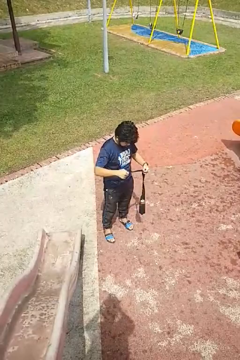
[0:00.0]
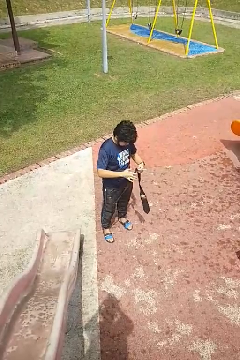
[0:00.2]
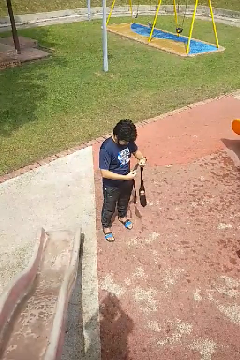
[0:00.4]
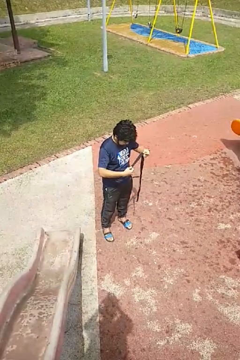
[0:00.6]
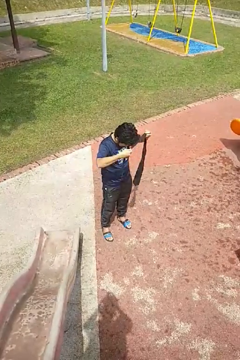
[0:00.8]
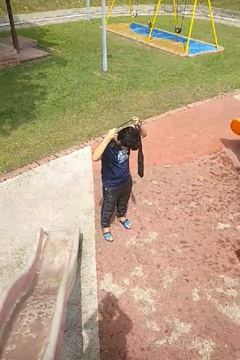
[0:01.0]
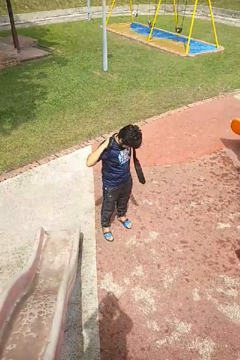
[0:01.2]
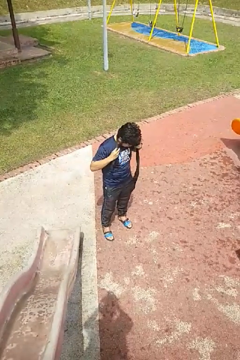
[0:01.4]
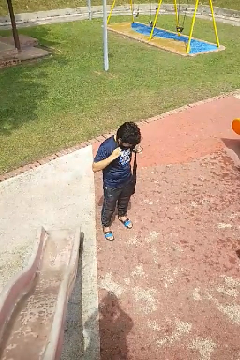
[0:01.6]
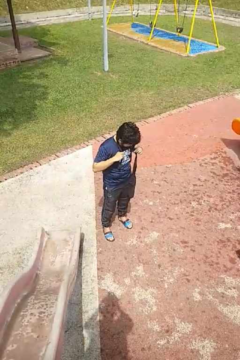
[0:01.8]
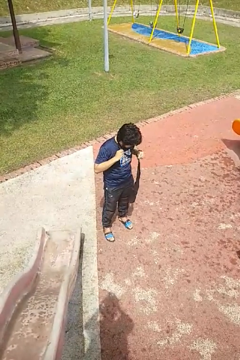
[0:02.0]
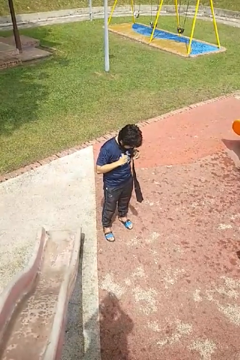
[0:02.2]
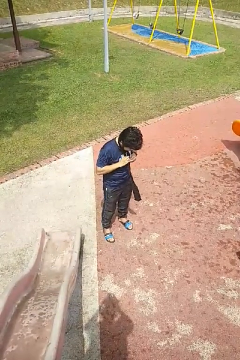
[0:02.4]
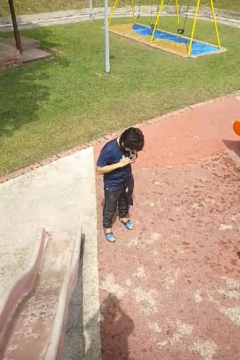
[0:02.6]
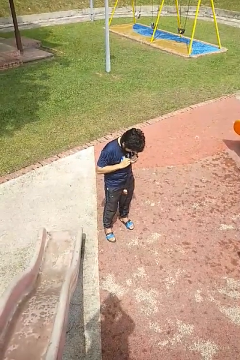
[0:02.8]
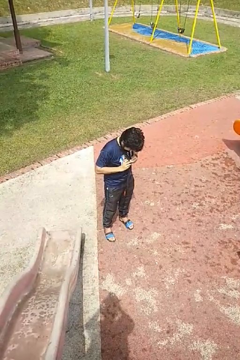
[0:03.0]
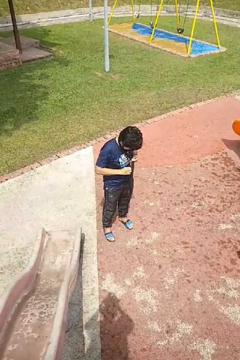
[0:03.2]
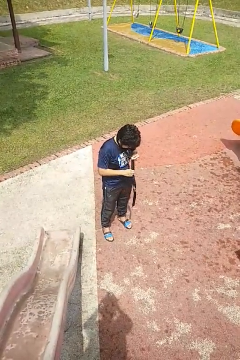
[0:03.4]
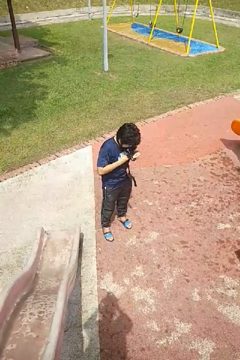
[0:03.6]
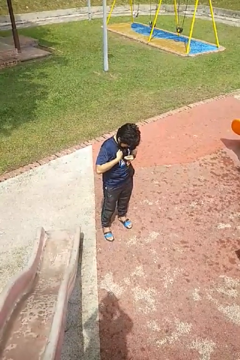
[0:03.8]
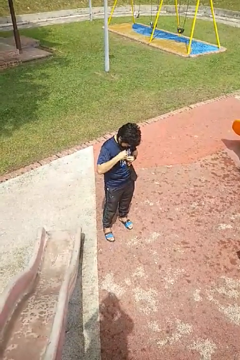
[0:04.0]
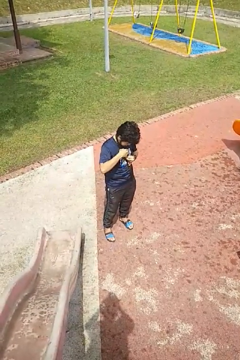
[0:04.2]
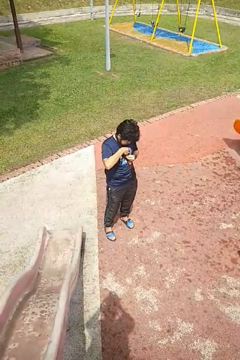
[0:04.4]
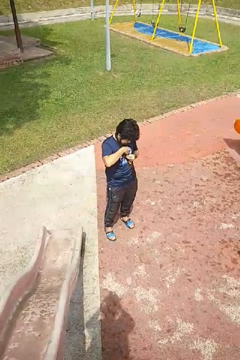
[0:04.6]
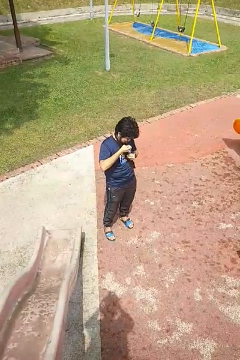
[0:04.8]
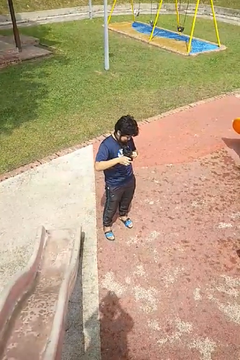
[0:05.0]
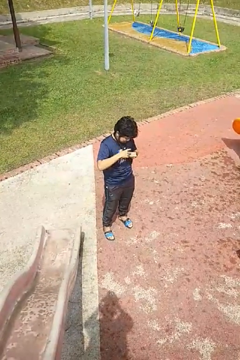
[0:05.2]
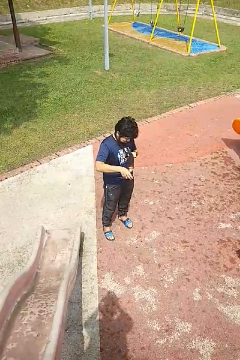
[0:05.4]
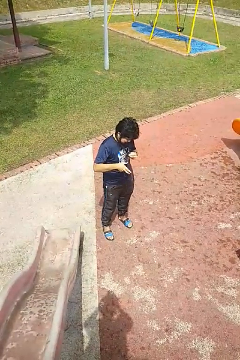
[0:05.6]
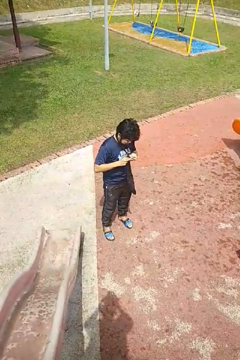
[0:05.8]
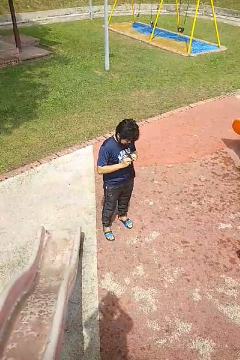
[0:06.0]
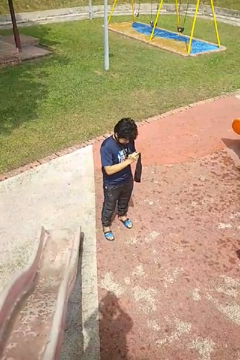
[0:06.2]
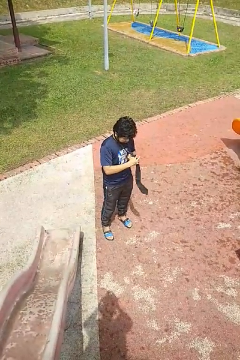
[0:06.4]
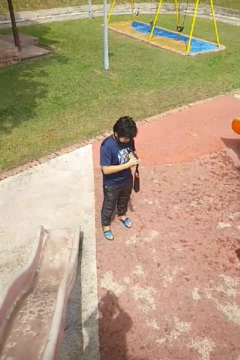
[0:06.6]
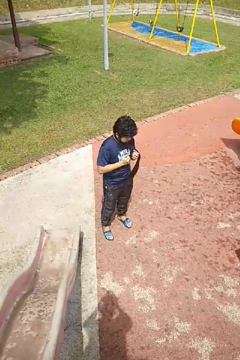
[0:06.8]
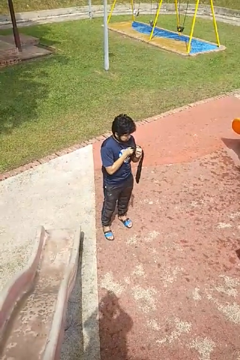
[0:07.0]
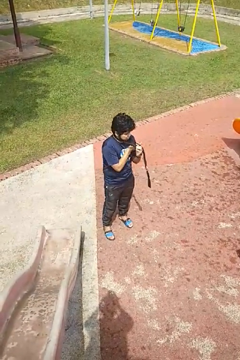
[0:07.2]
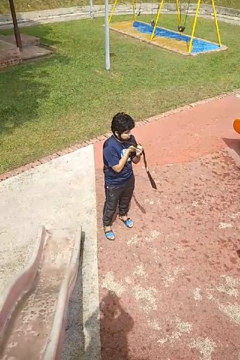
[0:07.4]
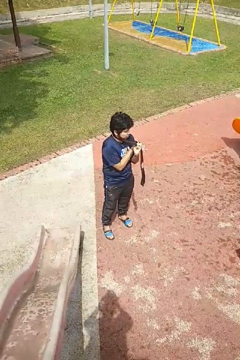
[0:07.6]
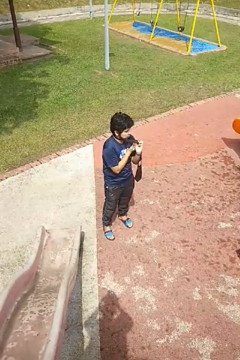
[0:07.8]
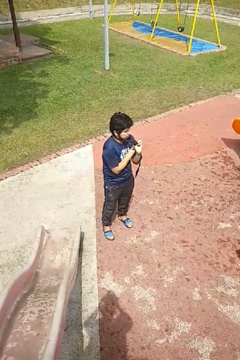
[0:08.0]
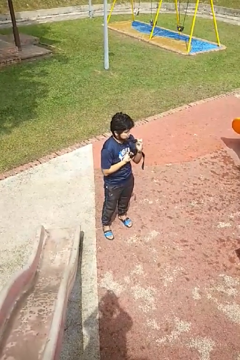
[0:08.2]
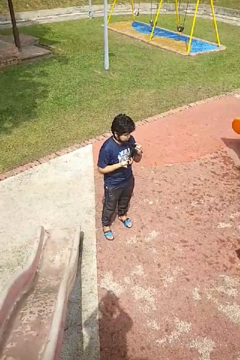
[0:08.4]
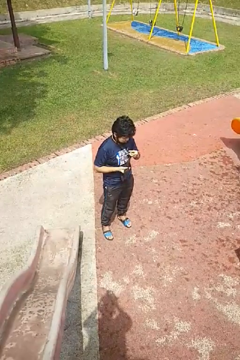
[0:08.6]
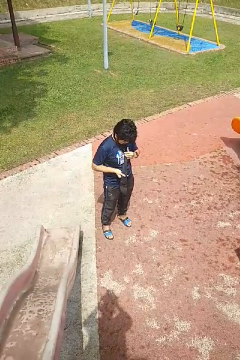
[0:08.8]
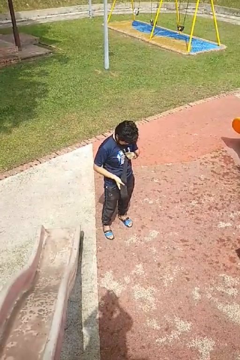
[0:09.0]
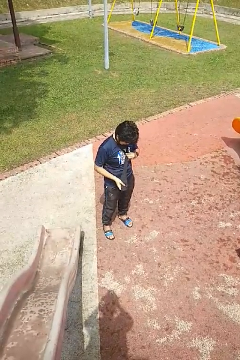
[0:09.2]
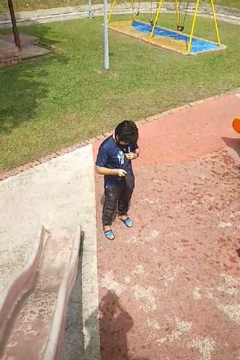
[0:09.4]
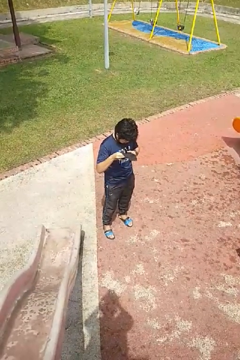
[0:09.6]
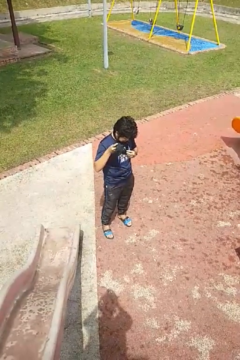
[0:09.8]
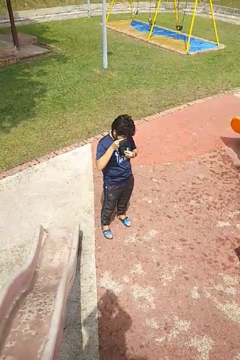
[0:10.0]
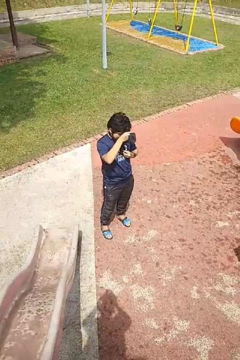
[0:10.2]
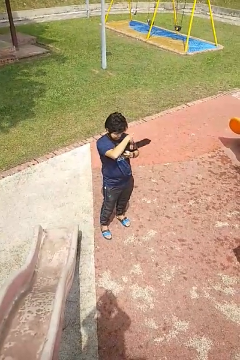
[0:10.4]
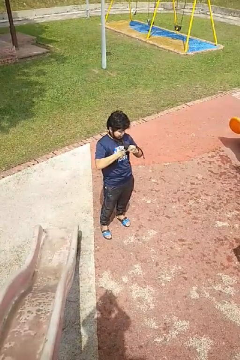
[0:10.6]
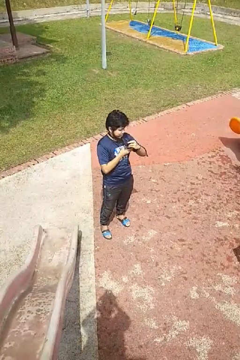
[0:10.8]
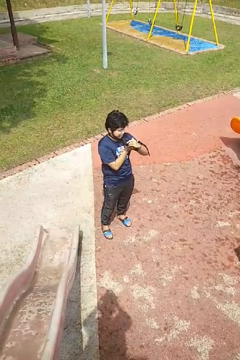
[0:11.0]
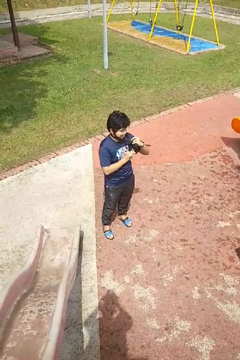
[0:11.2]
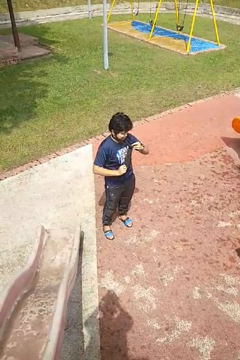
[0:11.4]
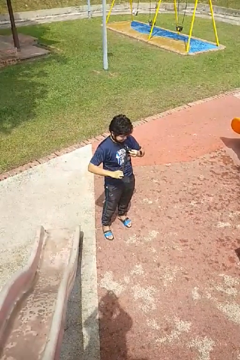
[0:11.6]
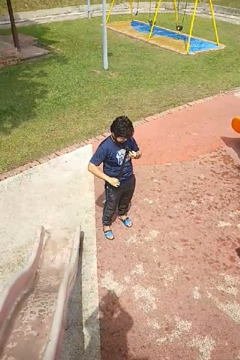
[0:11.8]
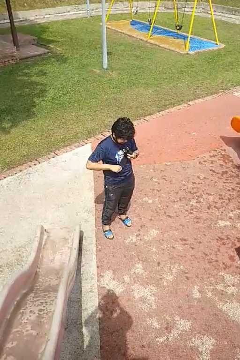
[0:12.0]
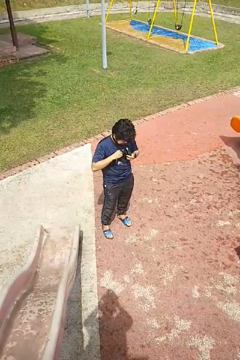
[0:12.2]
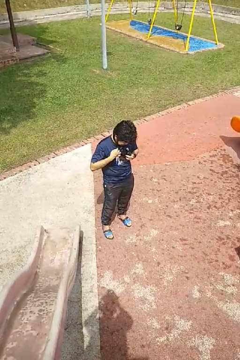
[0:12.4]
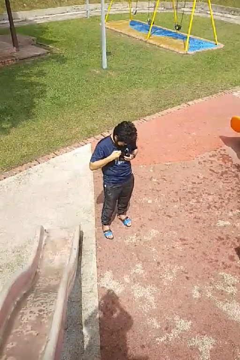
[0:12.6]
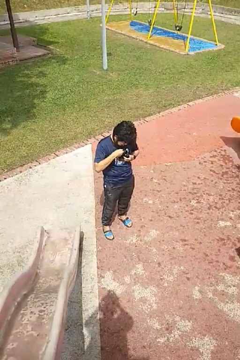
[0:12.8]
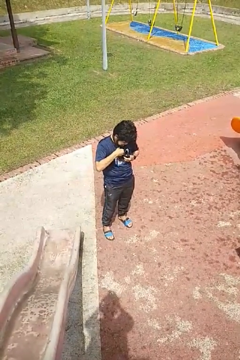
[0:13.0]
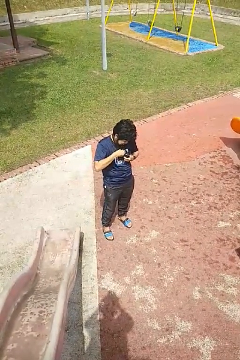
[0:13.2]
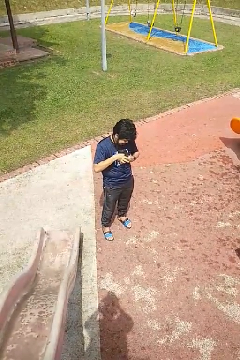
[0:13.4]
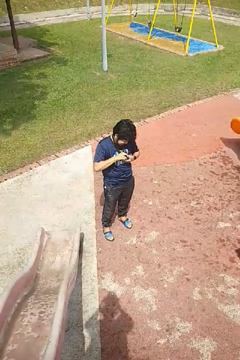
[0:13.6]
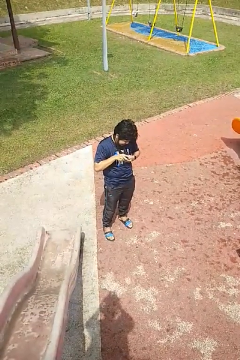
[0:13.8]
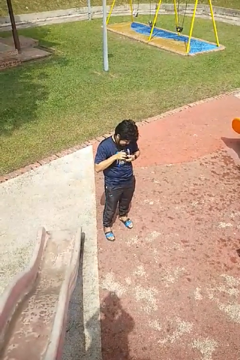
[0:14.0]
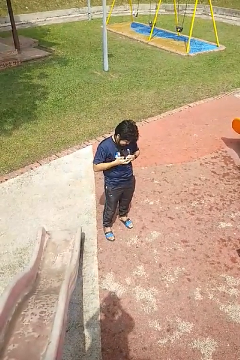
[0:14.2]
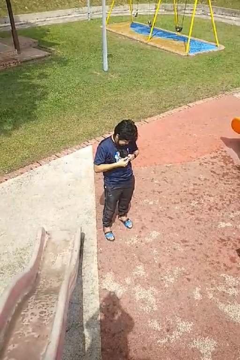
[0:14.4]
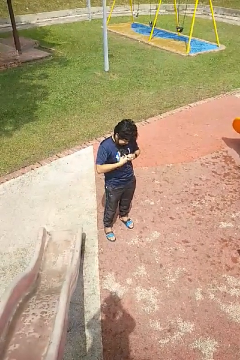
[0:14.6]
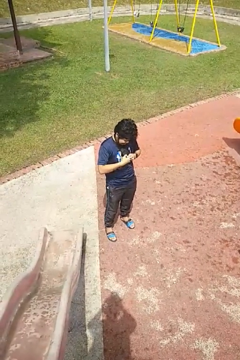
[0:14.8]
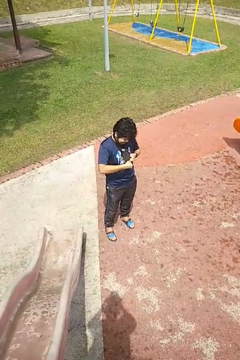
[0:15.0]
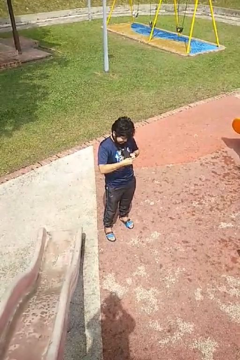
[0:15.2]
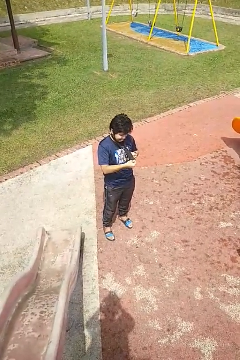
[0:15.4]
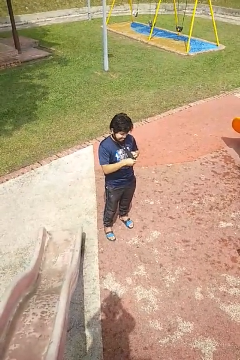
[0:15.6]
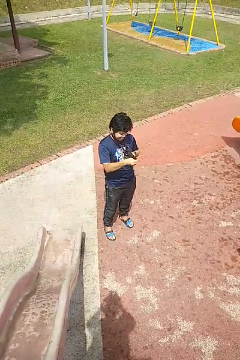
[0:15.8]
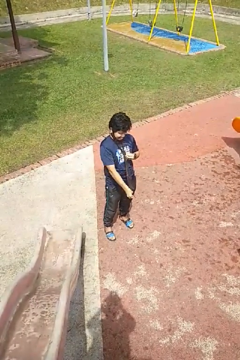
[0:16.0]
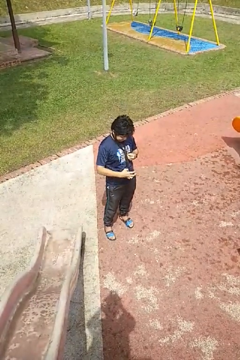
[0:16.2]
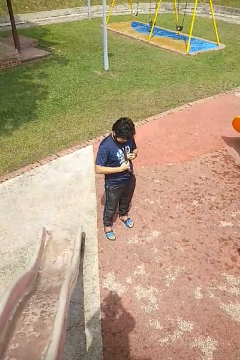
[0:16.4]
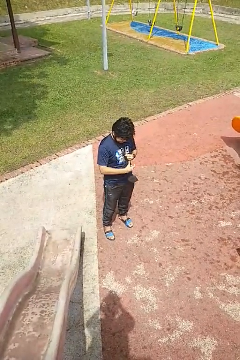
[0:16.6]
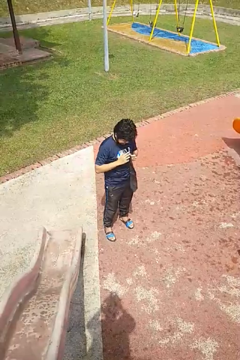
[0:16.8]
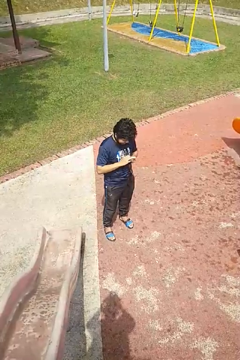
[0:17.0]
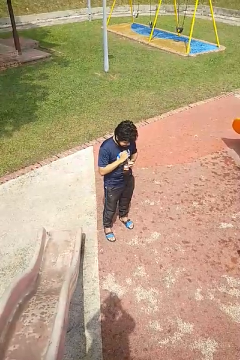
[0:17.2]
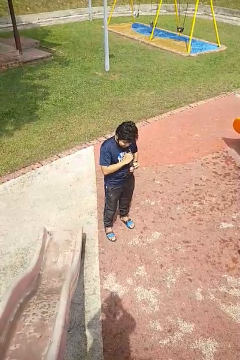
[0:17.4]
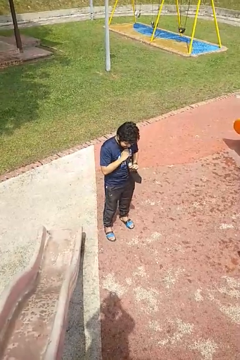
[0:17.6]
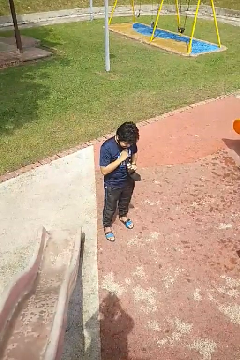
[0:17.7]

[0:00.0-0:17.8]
person puts on necktie

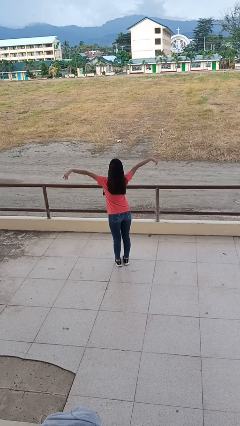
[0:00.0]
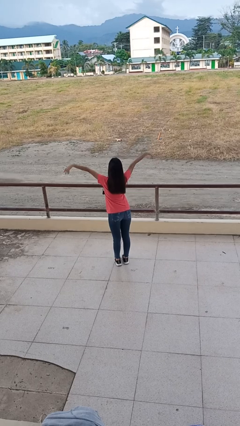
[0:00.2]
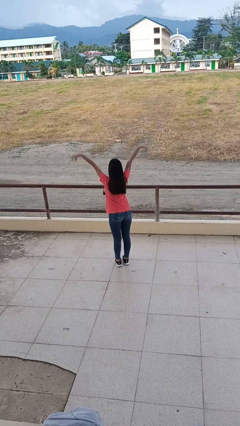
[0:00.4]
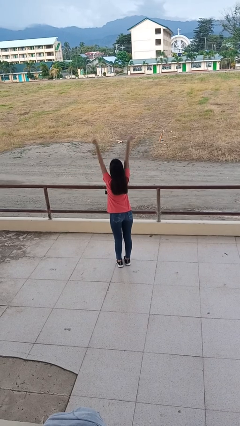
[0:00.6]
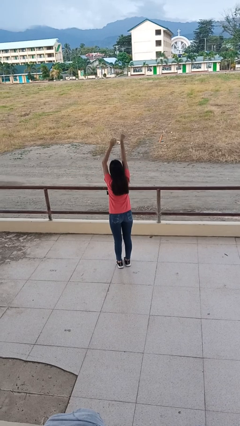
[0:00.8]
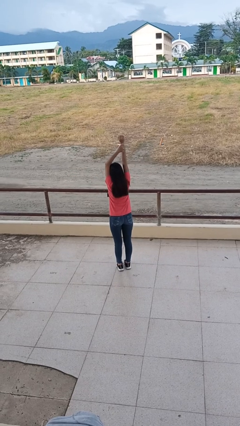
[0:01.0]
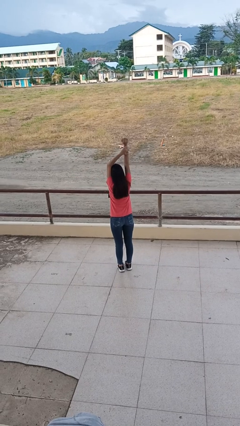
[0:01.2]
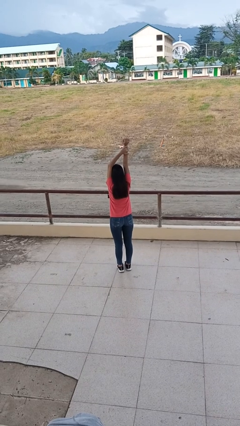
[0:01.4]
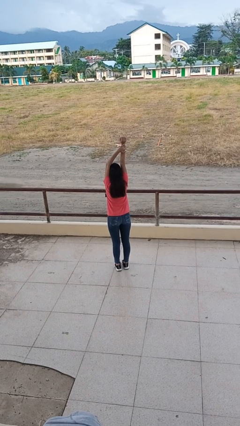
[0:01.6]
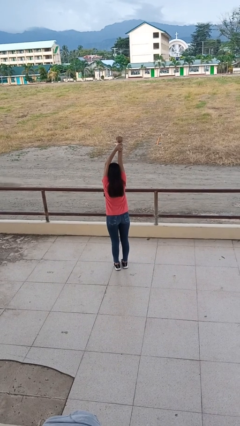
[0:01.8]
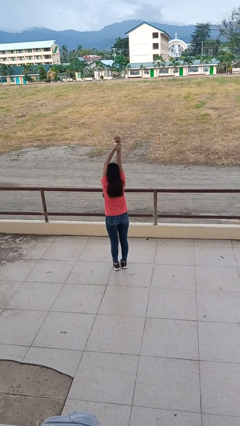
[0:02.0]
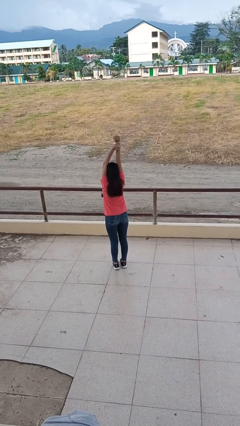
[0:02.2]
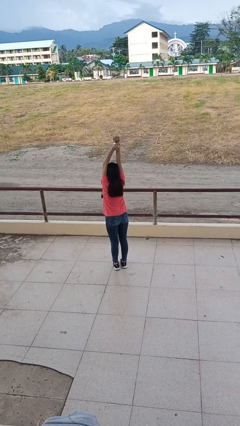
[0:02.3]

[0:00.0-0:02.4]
person stretches arms over head

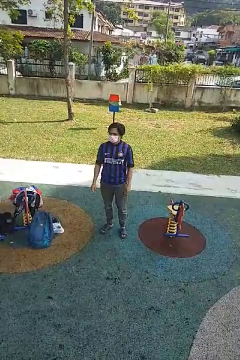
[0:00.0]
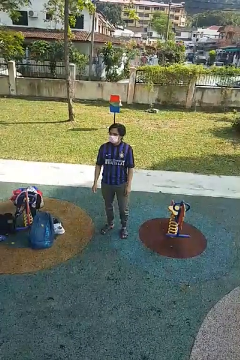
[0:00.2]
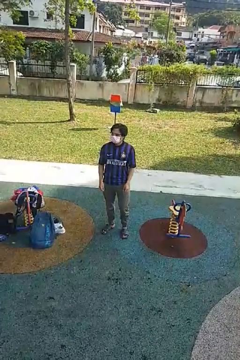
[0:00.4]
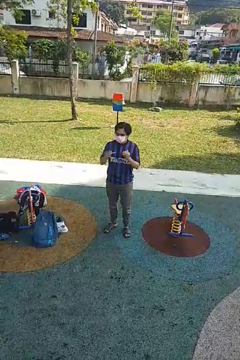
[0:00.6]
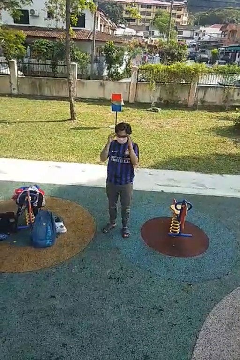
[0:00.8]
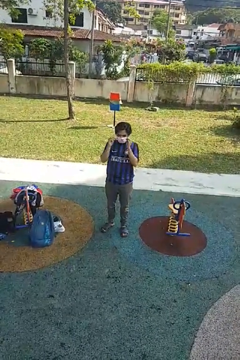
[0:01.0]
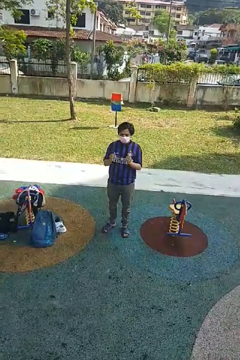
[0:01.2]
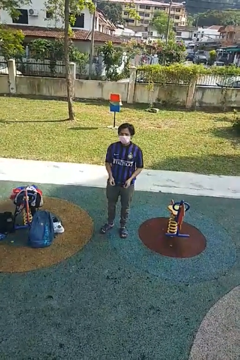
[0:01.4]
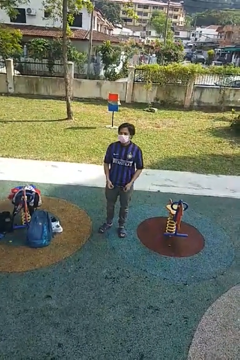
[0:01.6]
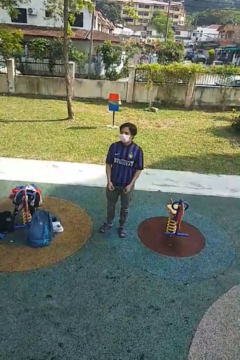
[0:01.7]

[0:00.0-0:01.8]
person takes off glasses
